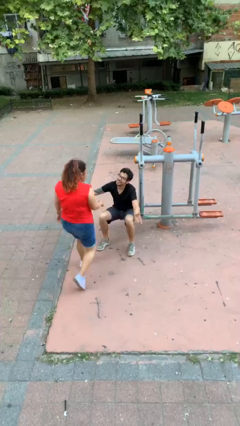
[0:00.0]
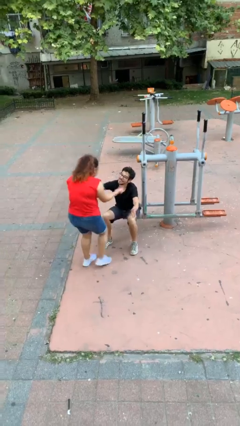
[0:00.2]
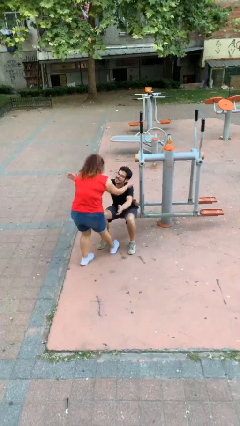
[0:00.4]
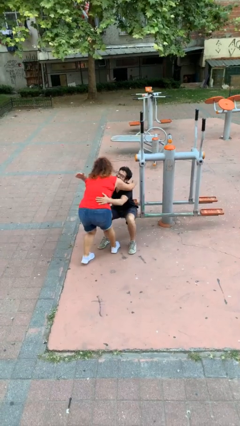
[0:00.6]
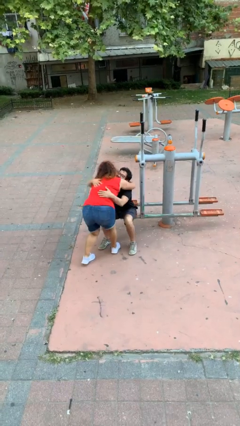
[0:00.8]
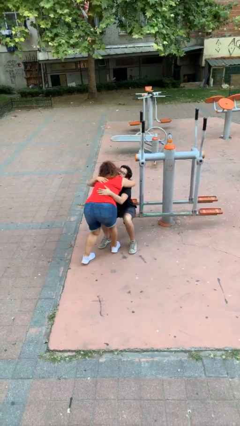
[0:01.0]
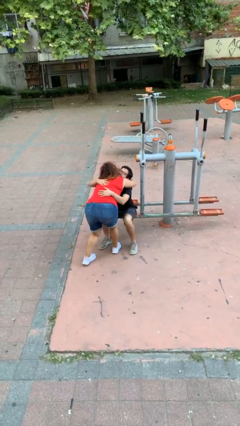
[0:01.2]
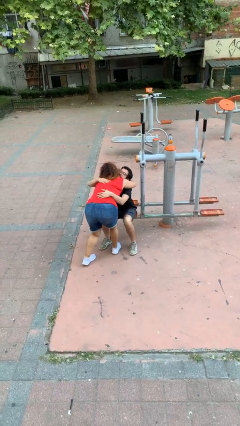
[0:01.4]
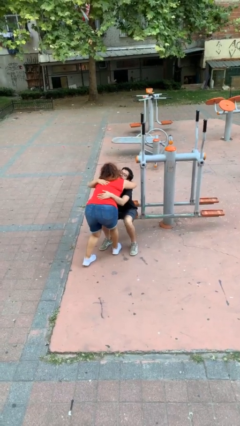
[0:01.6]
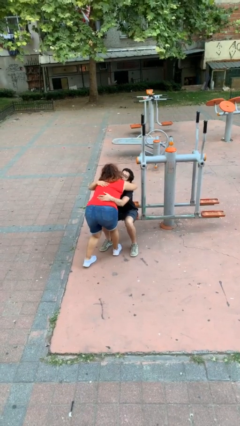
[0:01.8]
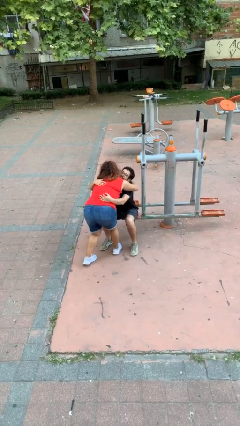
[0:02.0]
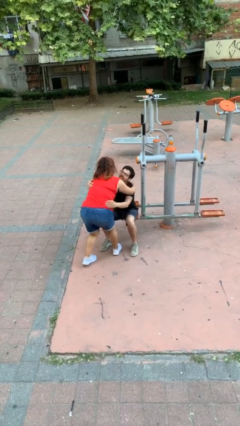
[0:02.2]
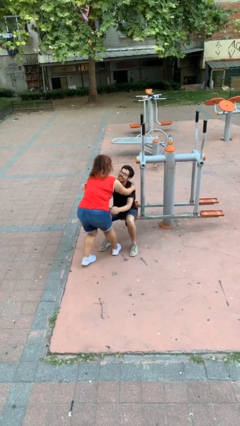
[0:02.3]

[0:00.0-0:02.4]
person embraces person

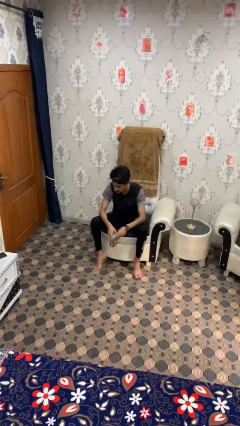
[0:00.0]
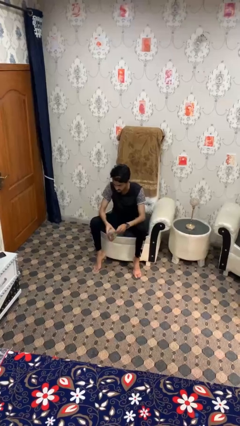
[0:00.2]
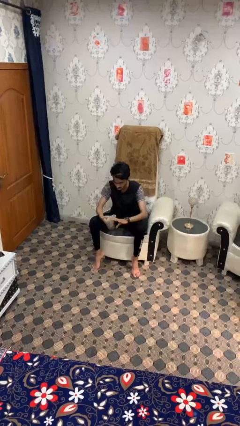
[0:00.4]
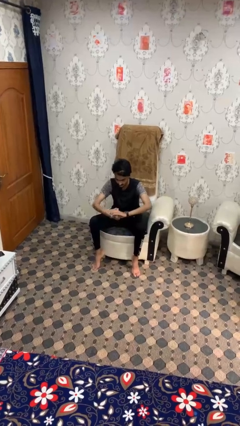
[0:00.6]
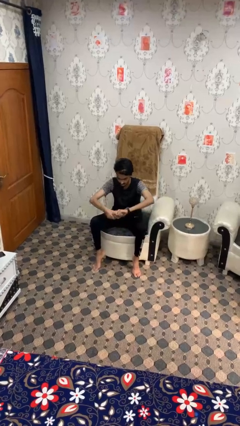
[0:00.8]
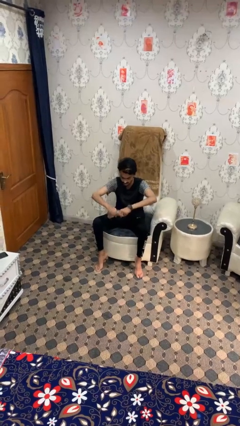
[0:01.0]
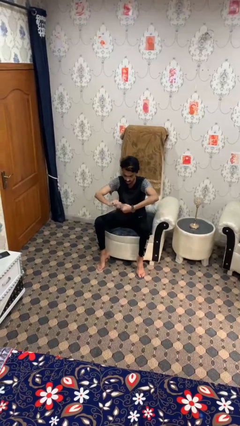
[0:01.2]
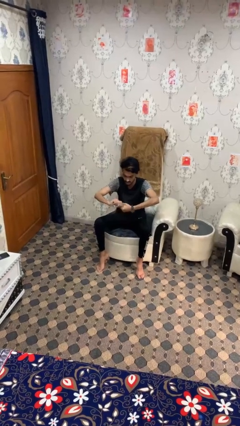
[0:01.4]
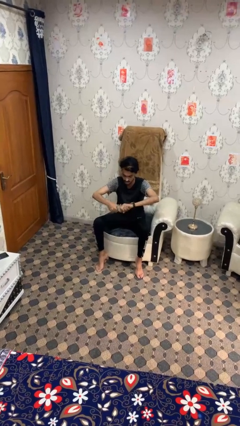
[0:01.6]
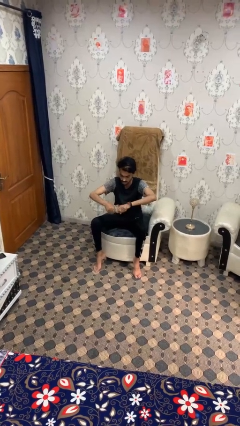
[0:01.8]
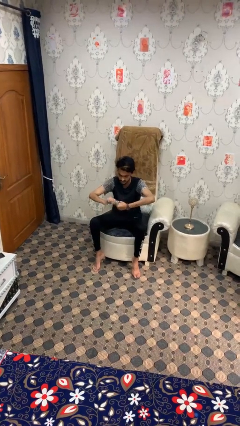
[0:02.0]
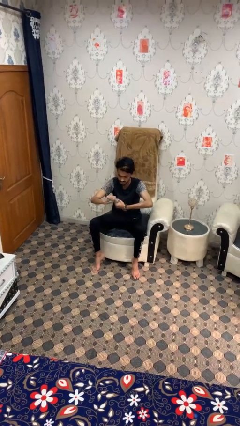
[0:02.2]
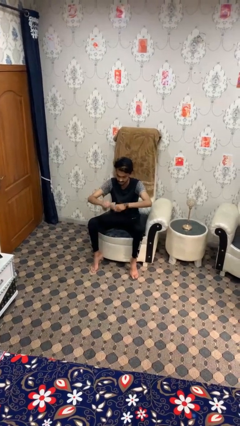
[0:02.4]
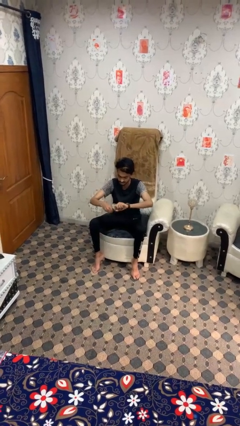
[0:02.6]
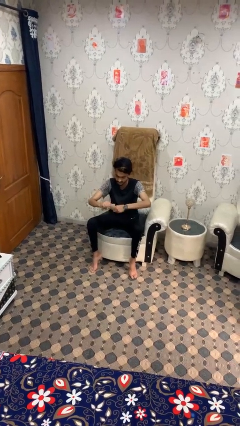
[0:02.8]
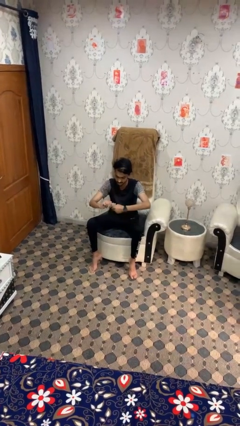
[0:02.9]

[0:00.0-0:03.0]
person squeezes object

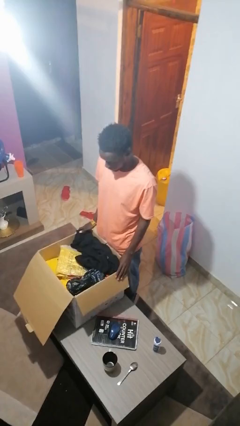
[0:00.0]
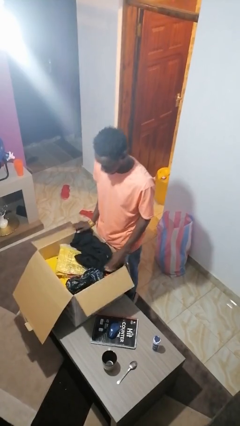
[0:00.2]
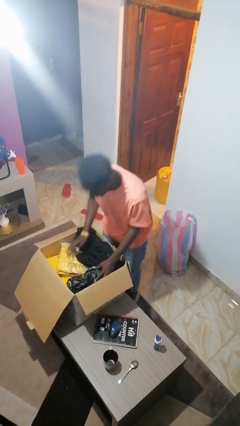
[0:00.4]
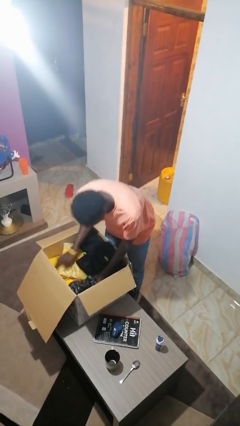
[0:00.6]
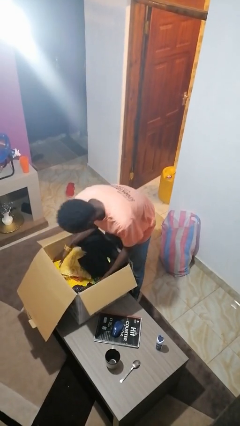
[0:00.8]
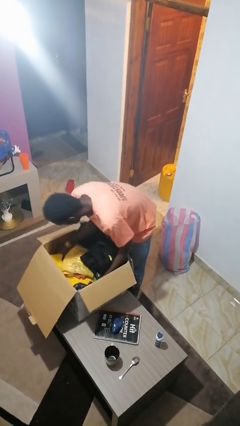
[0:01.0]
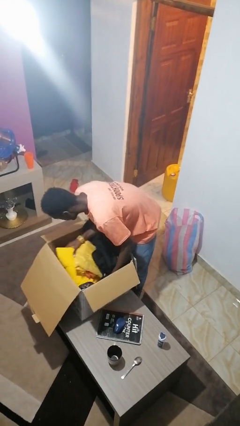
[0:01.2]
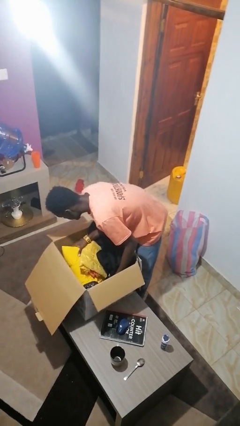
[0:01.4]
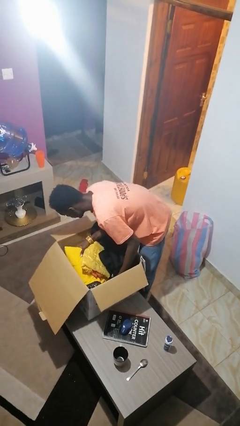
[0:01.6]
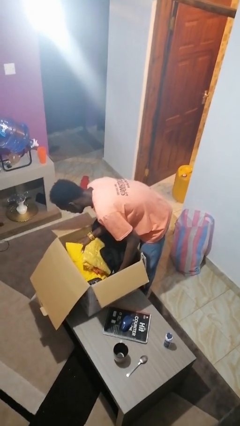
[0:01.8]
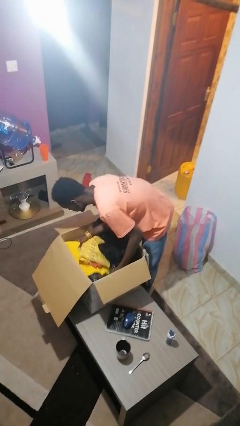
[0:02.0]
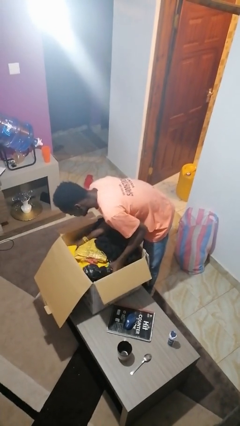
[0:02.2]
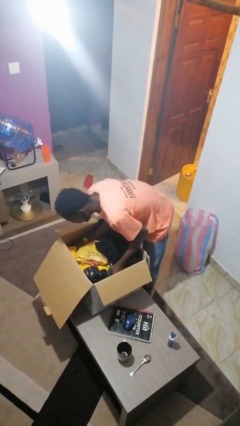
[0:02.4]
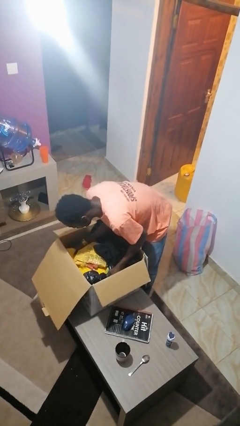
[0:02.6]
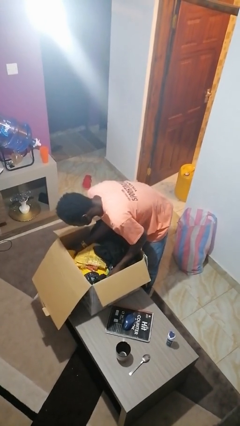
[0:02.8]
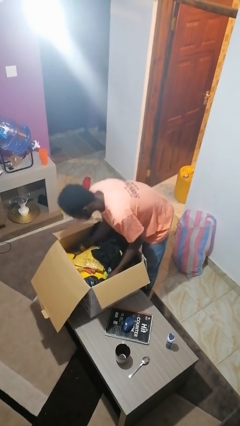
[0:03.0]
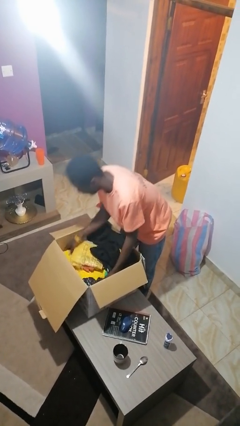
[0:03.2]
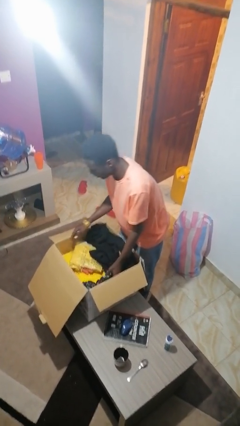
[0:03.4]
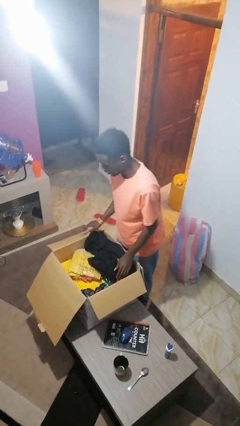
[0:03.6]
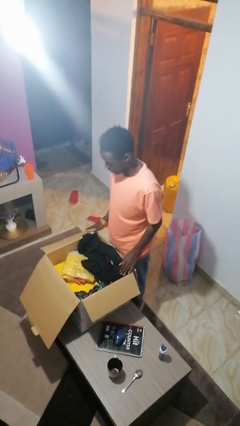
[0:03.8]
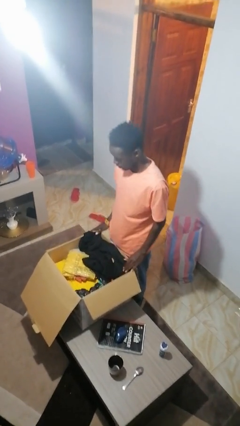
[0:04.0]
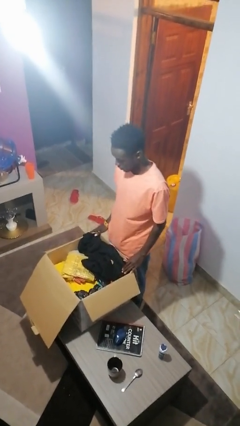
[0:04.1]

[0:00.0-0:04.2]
person searches in box

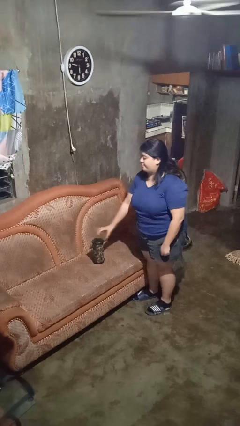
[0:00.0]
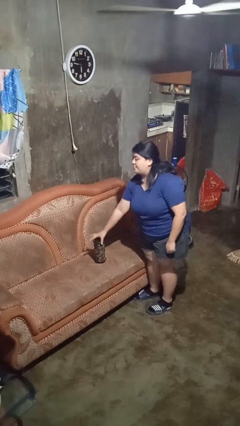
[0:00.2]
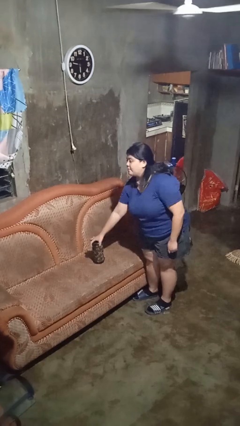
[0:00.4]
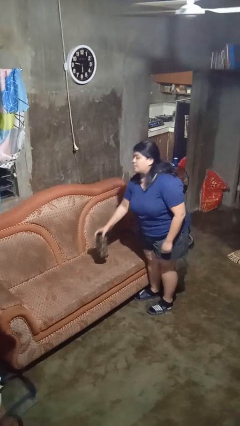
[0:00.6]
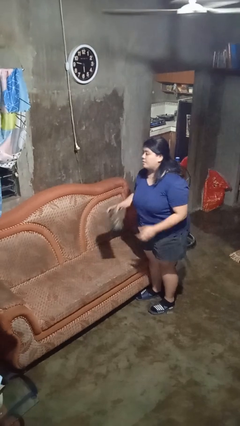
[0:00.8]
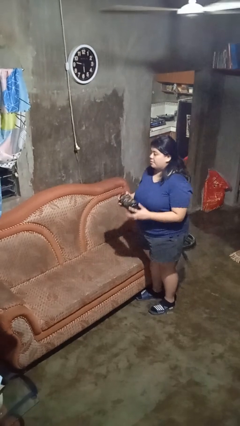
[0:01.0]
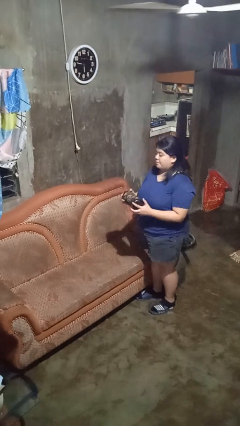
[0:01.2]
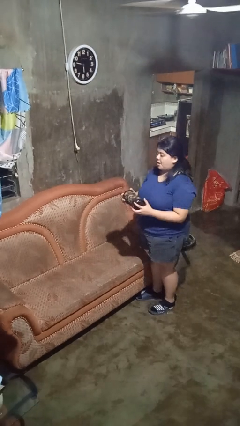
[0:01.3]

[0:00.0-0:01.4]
person picks up object from couch

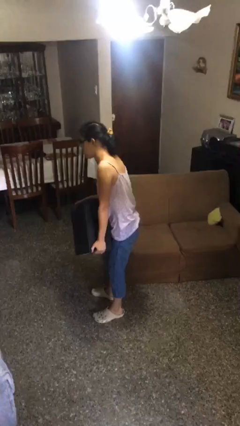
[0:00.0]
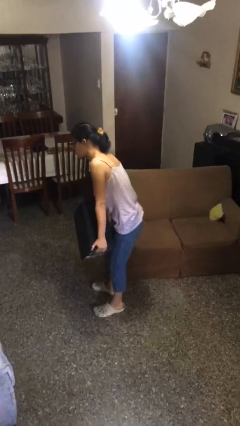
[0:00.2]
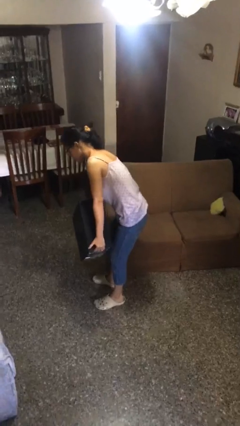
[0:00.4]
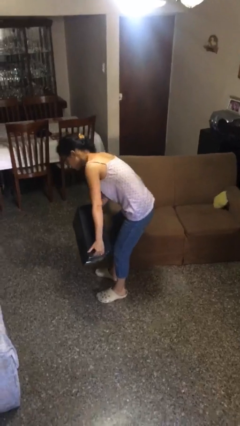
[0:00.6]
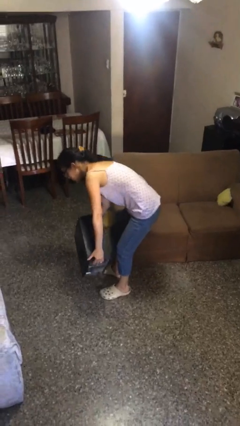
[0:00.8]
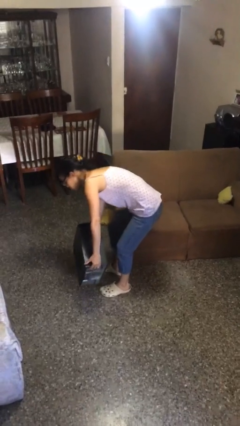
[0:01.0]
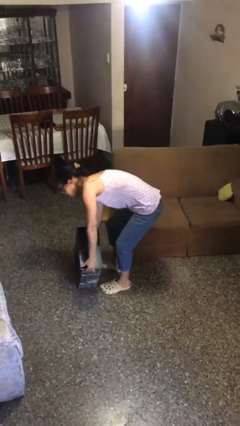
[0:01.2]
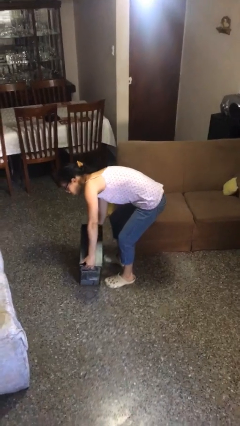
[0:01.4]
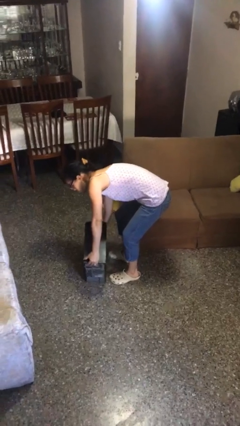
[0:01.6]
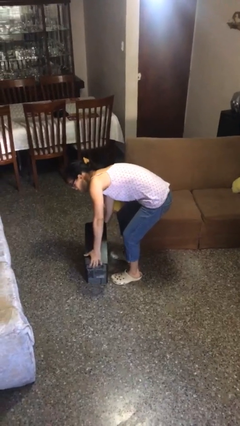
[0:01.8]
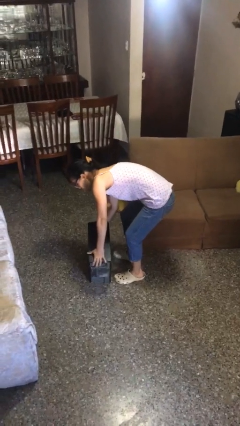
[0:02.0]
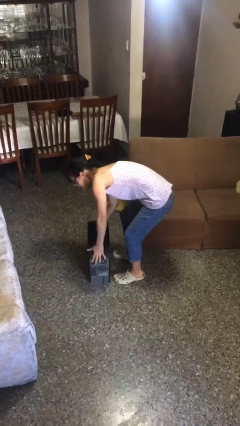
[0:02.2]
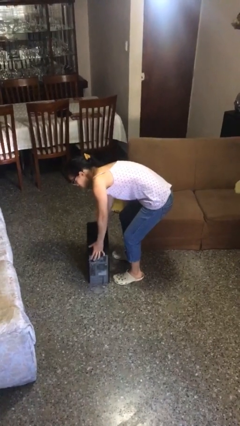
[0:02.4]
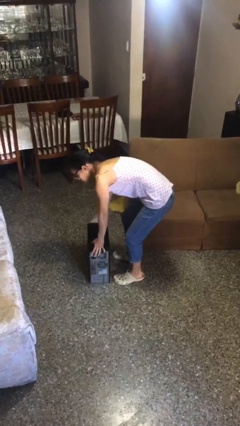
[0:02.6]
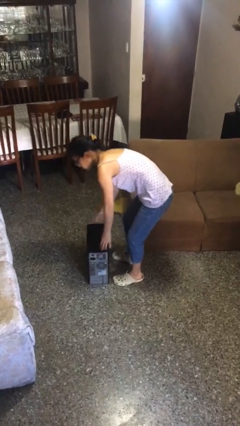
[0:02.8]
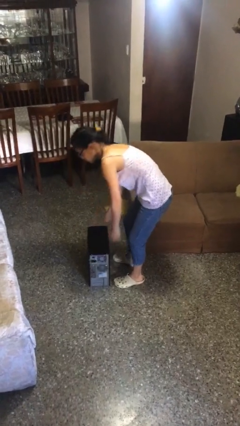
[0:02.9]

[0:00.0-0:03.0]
person puts down object on floor

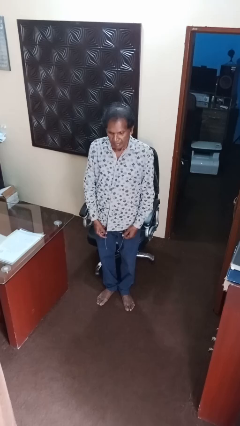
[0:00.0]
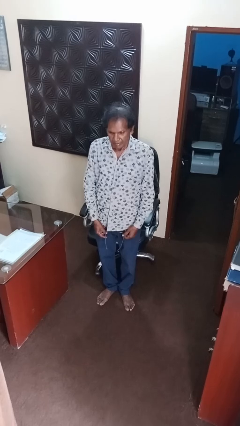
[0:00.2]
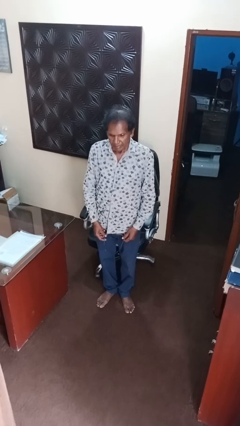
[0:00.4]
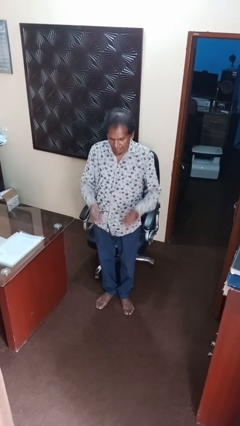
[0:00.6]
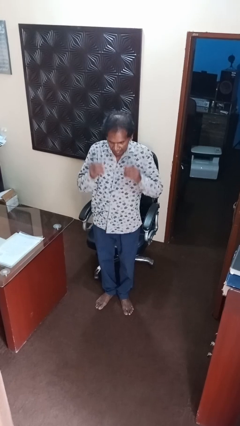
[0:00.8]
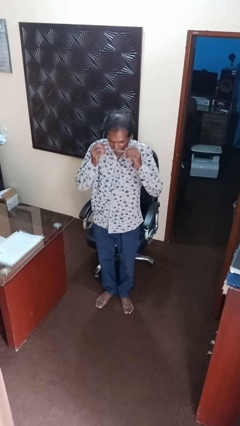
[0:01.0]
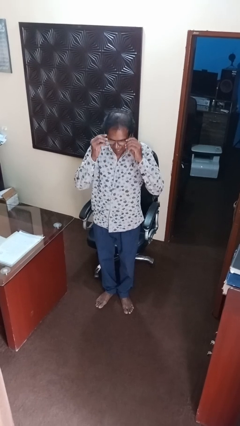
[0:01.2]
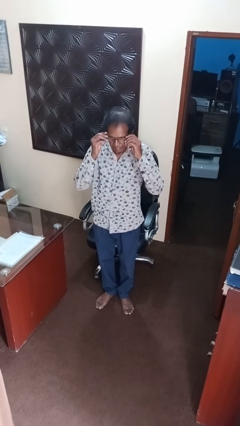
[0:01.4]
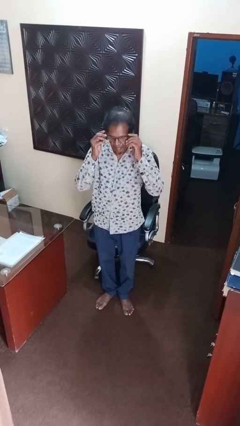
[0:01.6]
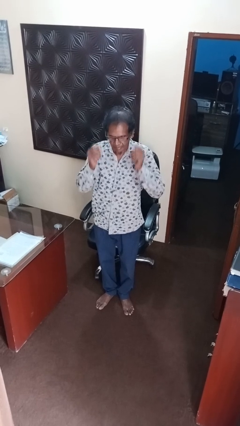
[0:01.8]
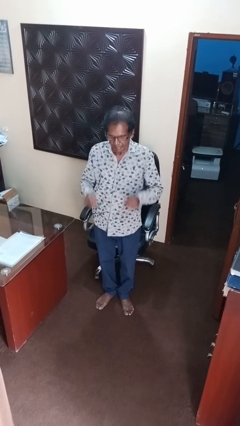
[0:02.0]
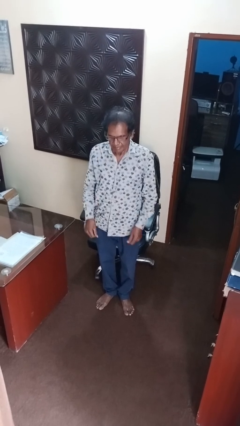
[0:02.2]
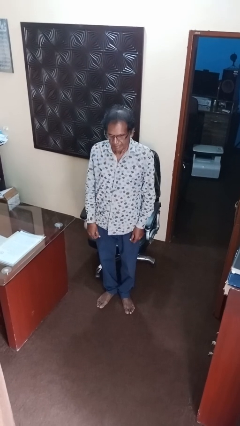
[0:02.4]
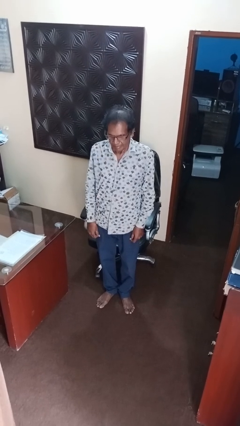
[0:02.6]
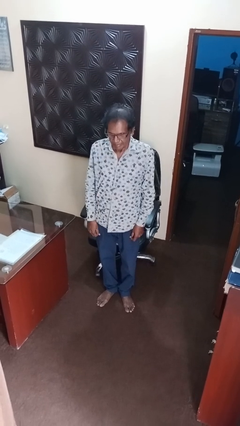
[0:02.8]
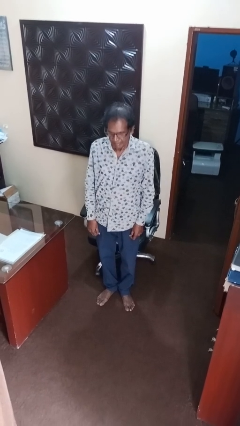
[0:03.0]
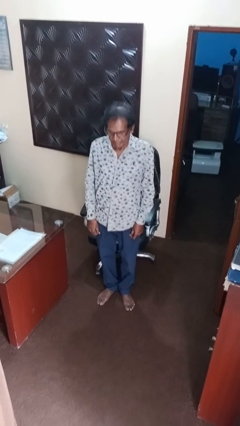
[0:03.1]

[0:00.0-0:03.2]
person puts on glasses

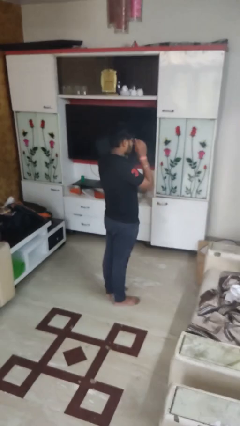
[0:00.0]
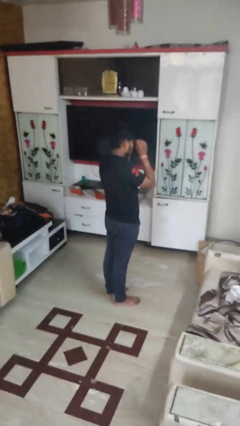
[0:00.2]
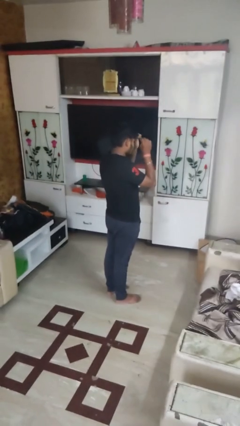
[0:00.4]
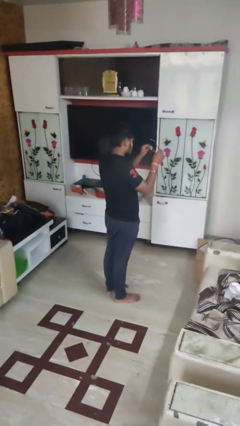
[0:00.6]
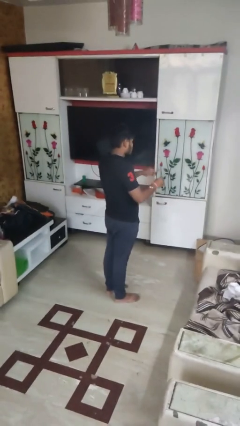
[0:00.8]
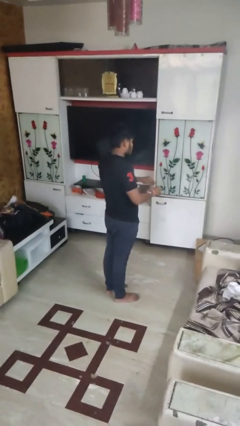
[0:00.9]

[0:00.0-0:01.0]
person takes off glasses
